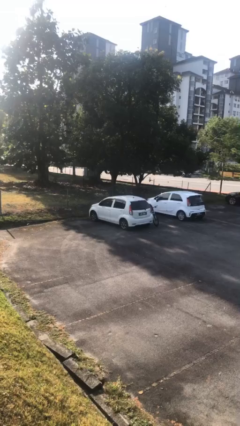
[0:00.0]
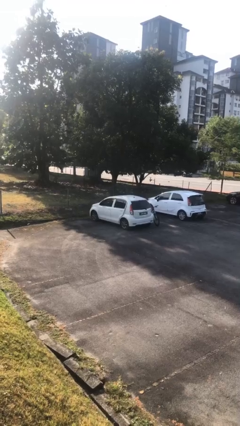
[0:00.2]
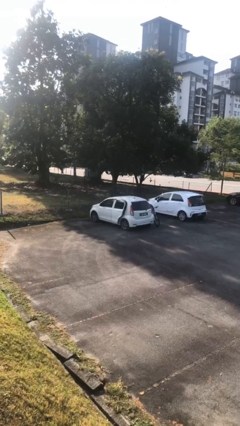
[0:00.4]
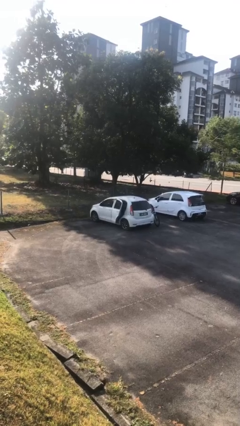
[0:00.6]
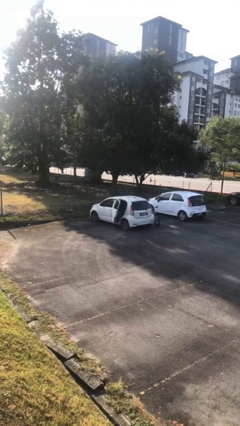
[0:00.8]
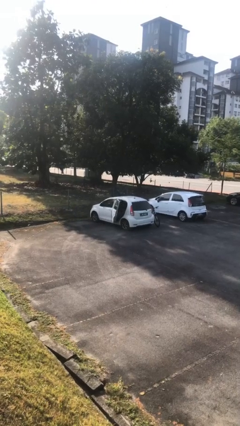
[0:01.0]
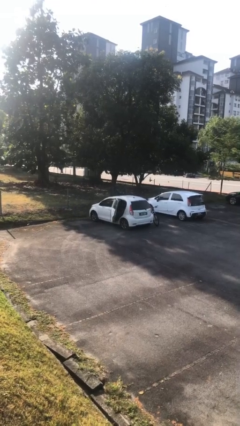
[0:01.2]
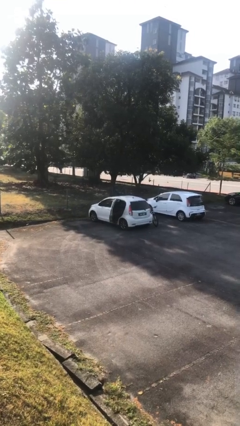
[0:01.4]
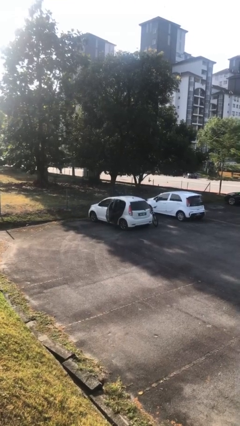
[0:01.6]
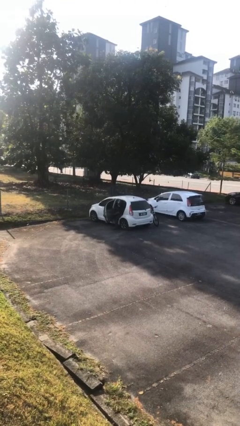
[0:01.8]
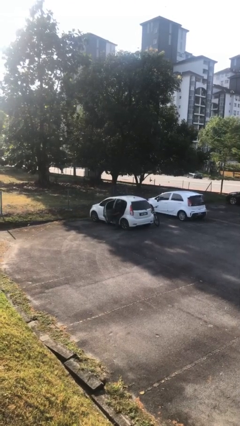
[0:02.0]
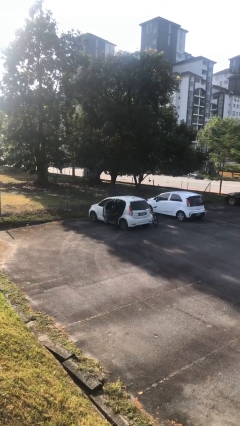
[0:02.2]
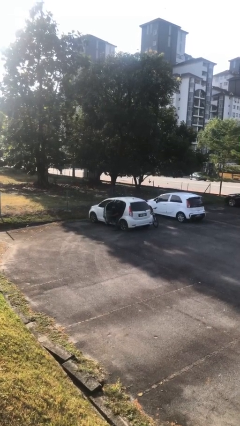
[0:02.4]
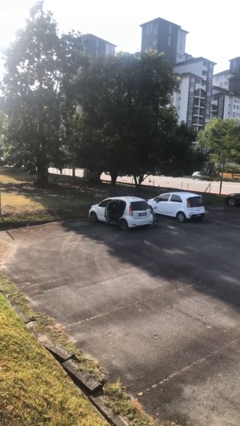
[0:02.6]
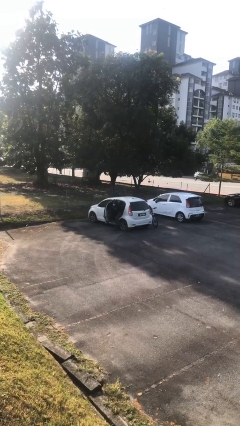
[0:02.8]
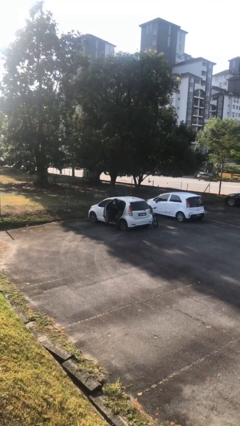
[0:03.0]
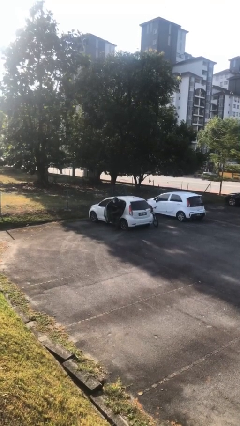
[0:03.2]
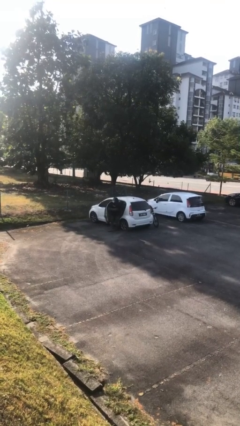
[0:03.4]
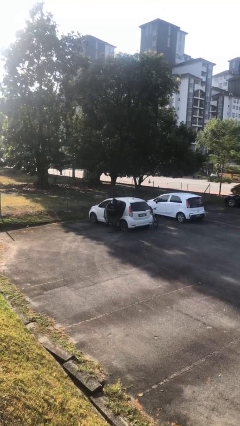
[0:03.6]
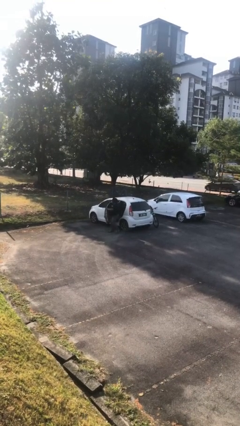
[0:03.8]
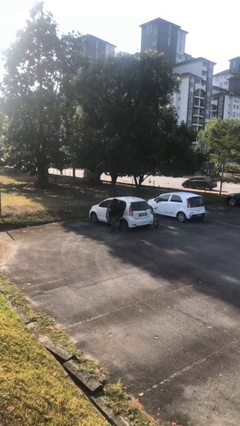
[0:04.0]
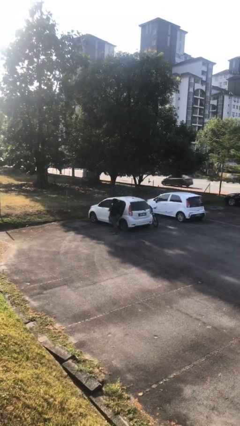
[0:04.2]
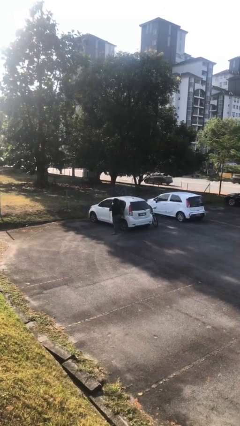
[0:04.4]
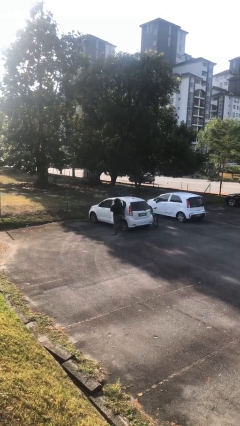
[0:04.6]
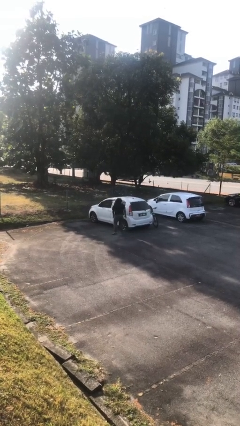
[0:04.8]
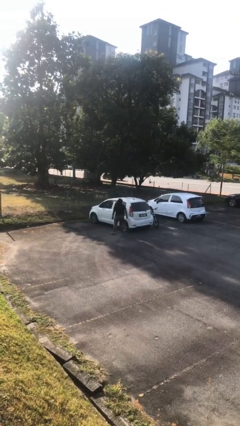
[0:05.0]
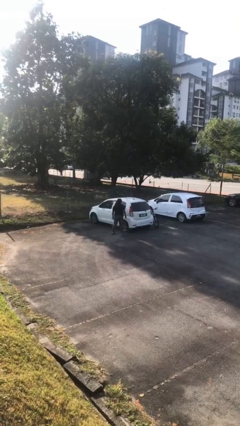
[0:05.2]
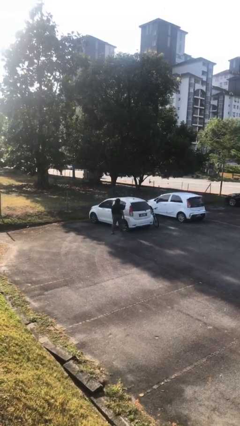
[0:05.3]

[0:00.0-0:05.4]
car drops off person

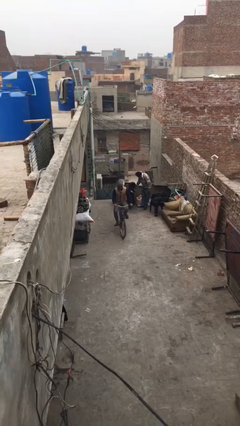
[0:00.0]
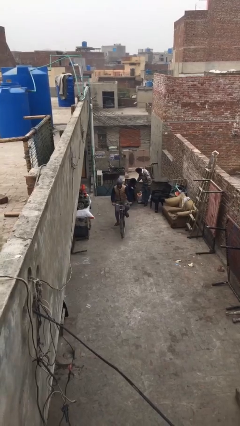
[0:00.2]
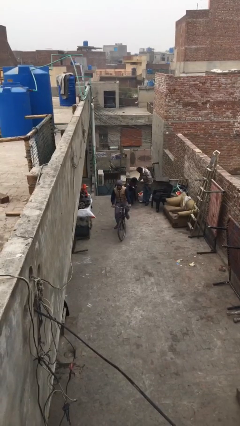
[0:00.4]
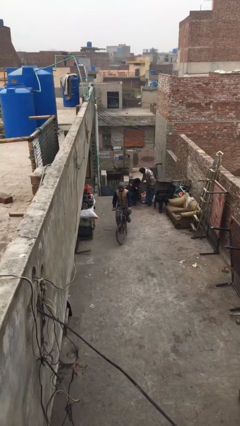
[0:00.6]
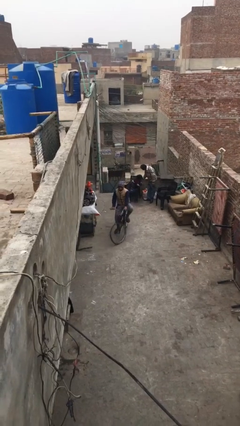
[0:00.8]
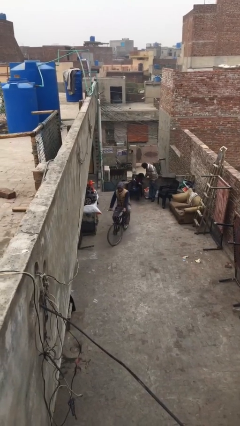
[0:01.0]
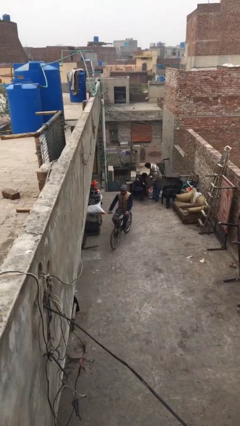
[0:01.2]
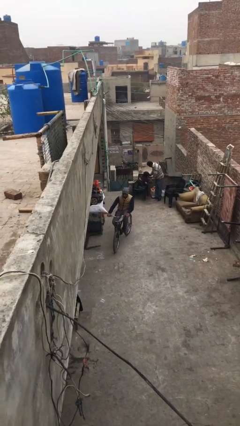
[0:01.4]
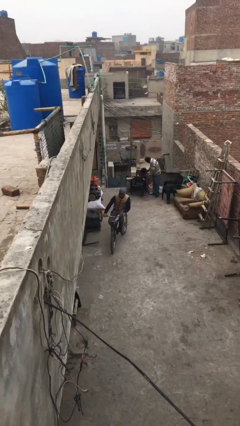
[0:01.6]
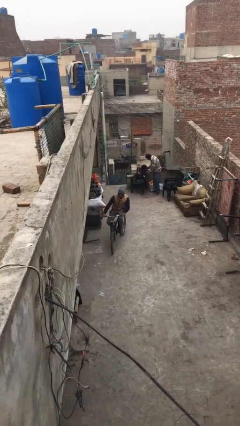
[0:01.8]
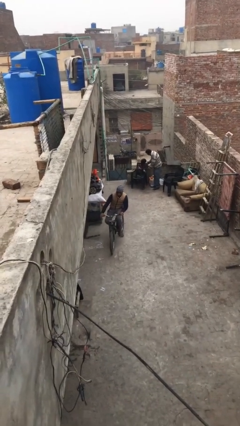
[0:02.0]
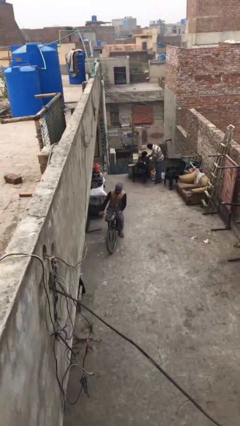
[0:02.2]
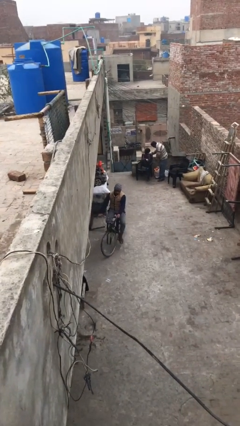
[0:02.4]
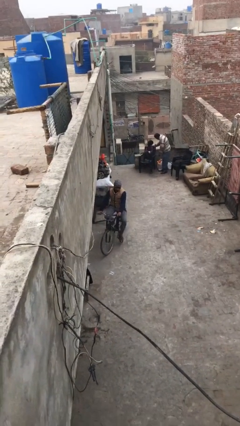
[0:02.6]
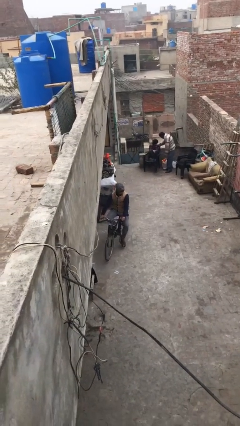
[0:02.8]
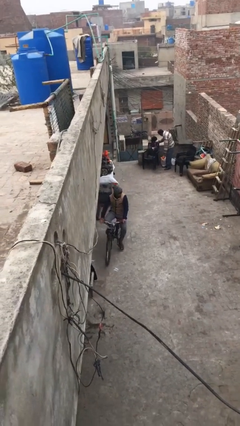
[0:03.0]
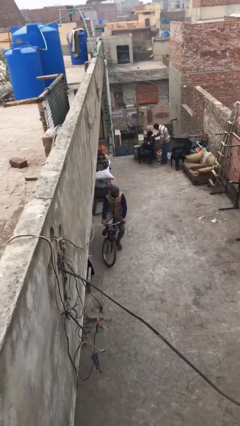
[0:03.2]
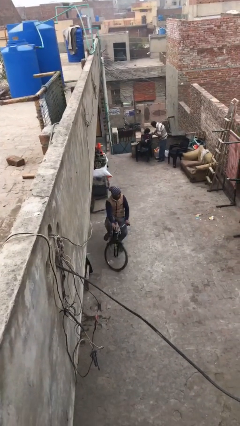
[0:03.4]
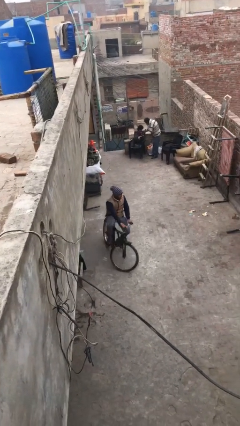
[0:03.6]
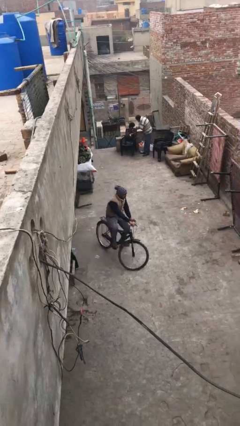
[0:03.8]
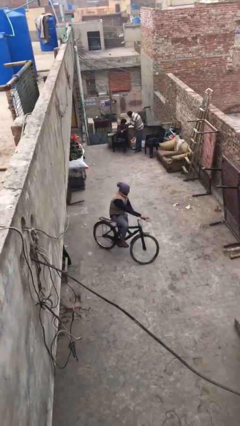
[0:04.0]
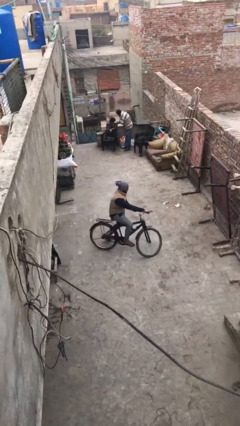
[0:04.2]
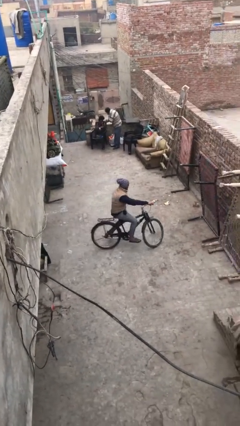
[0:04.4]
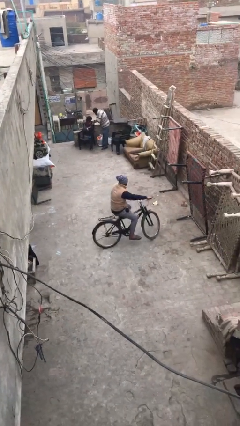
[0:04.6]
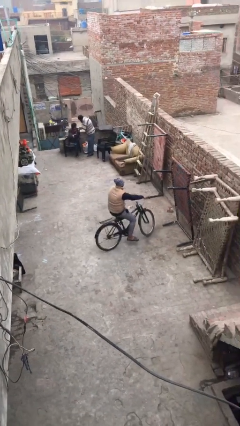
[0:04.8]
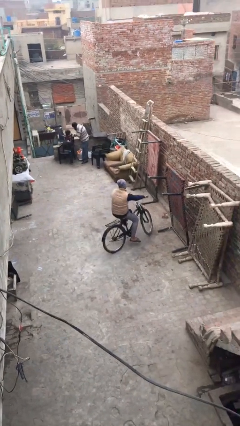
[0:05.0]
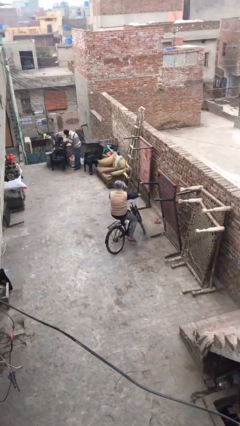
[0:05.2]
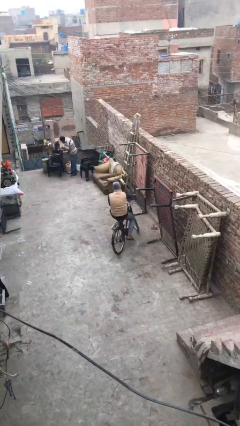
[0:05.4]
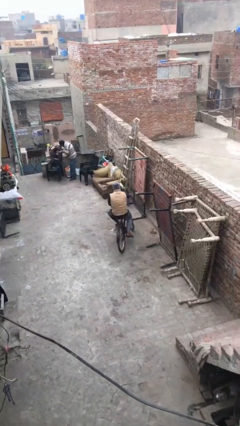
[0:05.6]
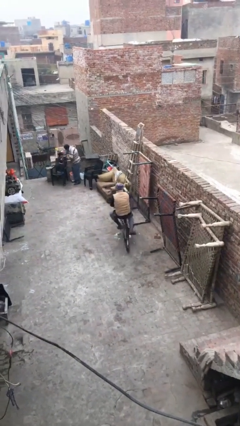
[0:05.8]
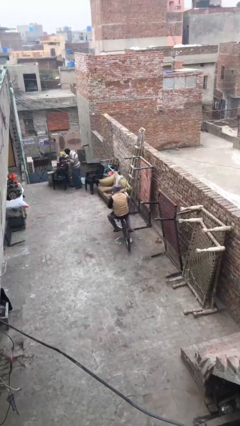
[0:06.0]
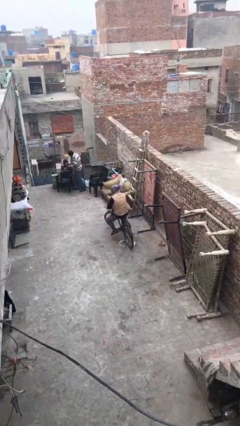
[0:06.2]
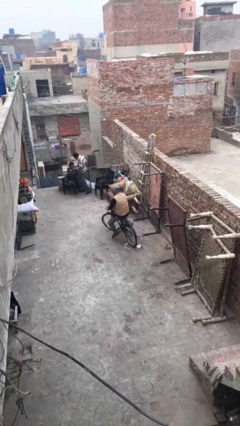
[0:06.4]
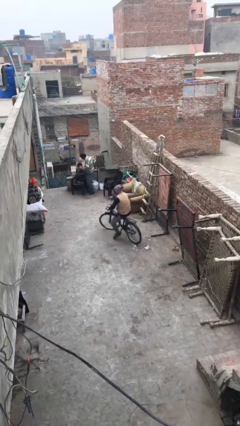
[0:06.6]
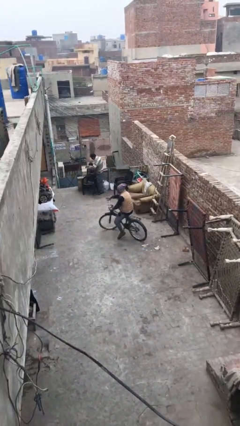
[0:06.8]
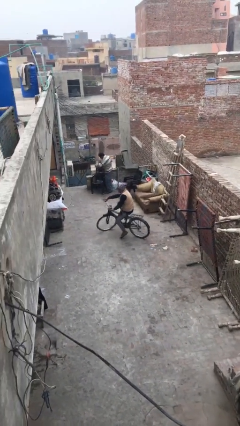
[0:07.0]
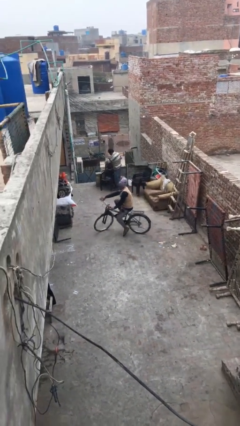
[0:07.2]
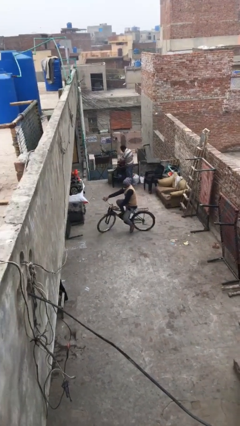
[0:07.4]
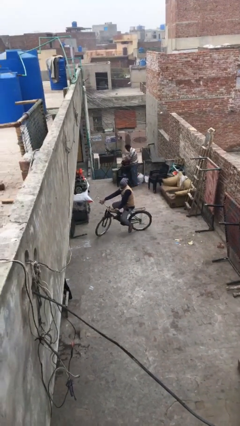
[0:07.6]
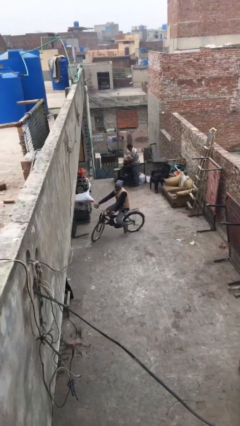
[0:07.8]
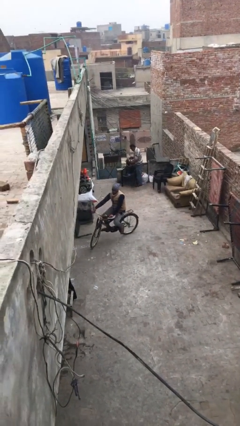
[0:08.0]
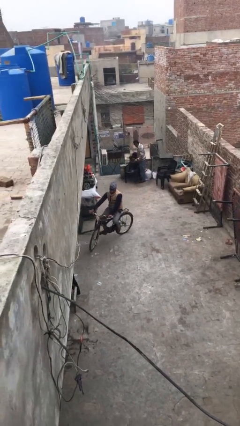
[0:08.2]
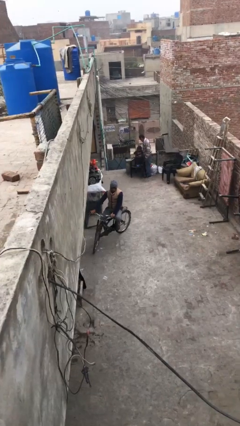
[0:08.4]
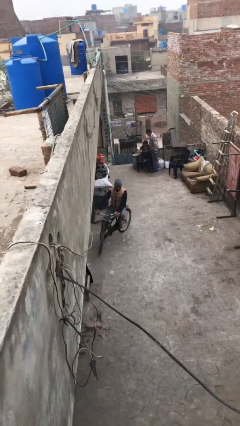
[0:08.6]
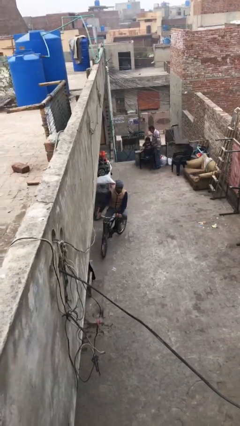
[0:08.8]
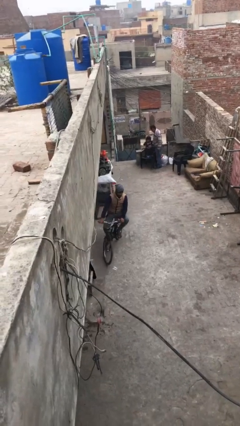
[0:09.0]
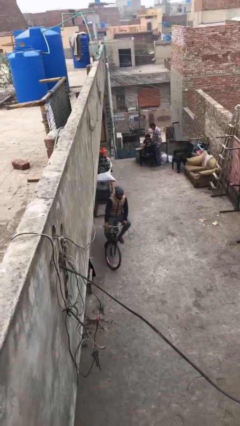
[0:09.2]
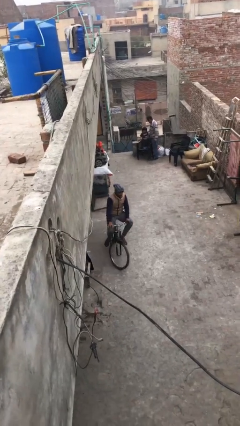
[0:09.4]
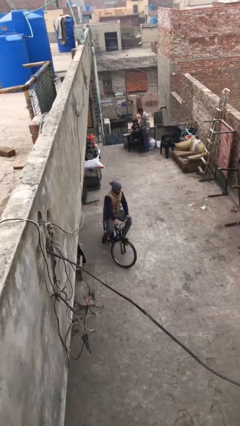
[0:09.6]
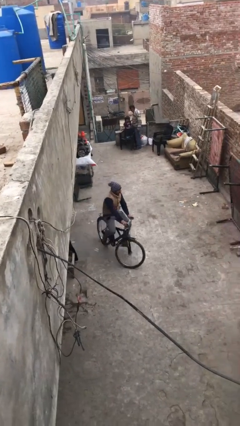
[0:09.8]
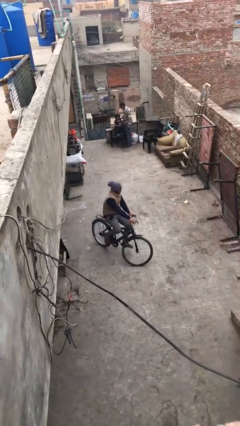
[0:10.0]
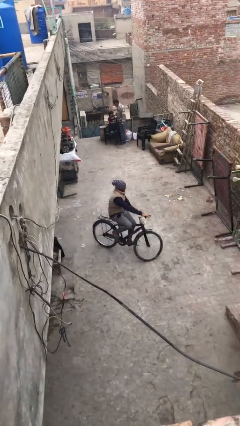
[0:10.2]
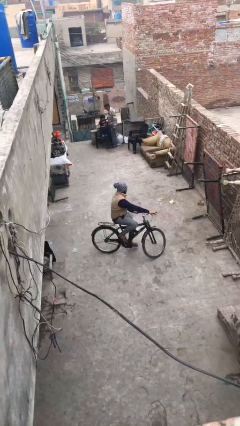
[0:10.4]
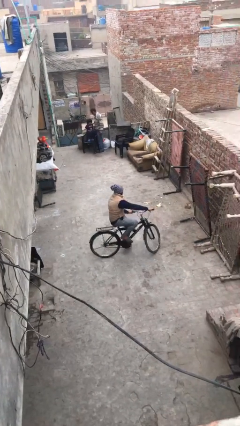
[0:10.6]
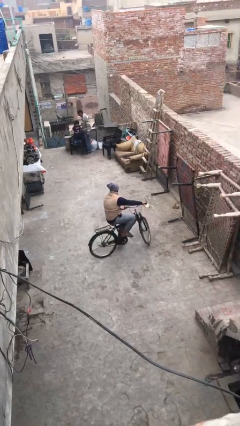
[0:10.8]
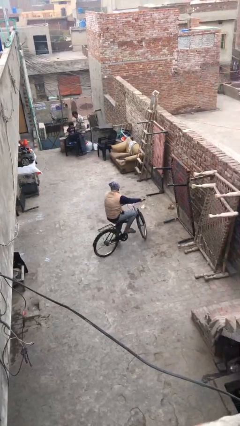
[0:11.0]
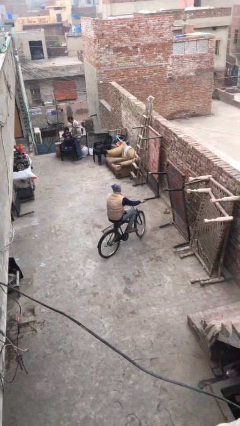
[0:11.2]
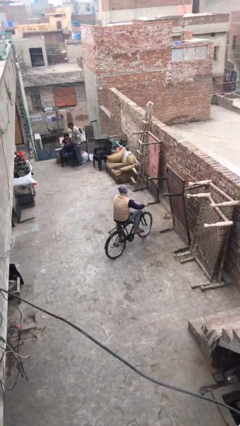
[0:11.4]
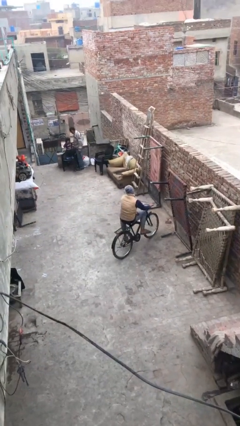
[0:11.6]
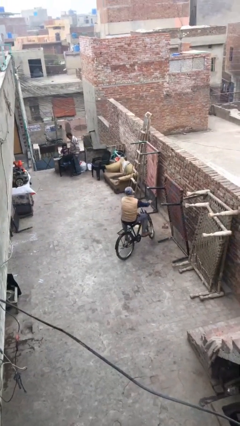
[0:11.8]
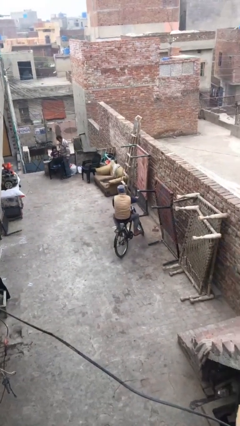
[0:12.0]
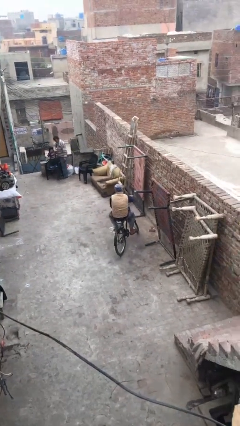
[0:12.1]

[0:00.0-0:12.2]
person rides bicycle

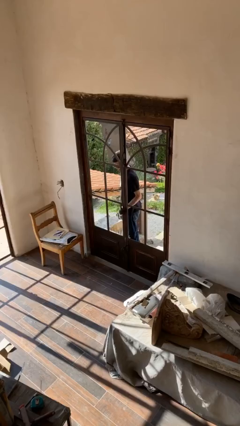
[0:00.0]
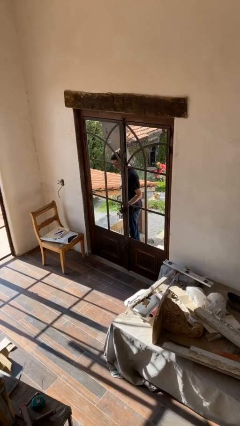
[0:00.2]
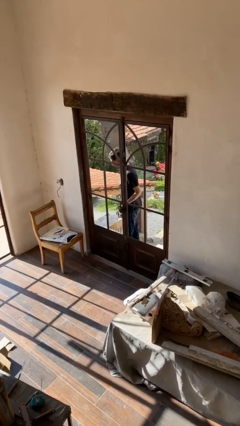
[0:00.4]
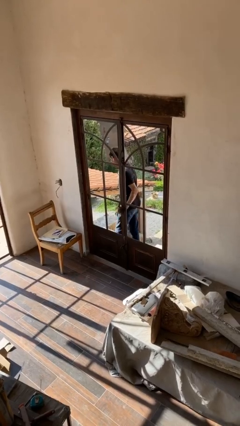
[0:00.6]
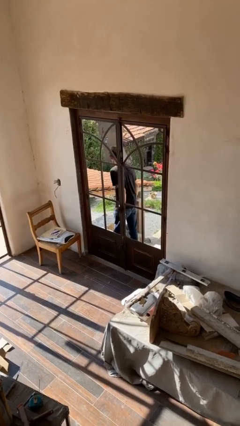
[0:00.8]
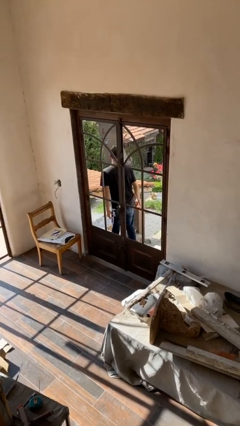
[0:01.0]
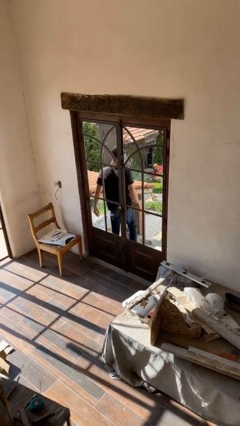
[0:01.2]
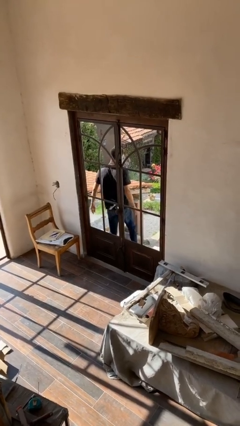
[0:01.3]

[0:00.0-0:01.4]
person closes facility door
